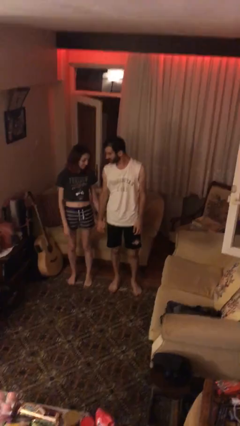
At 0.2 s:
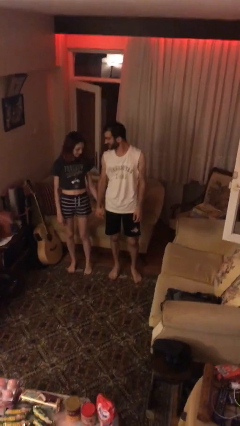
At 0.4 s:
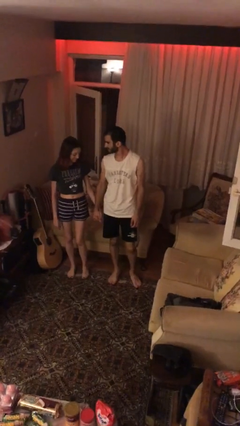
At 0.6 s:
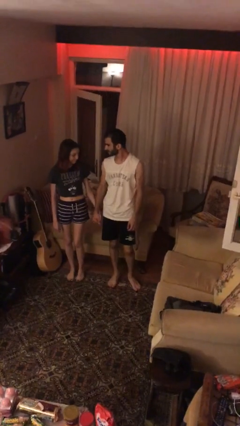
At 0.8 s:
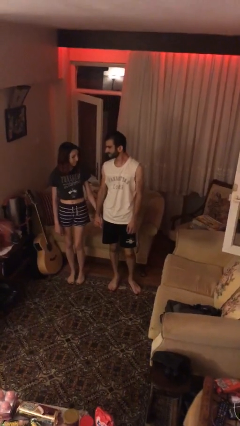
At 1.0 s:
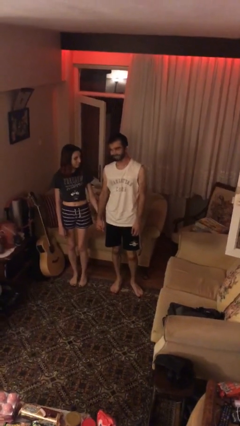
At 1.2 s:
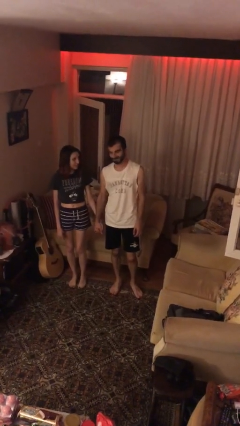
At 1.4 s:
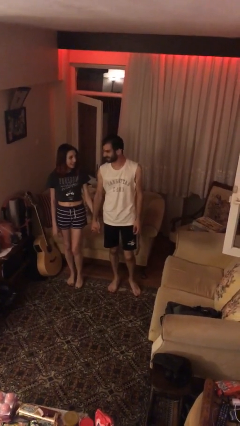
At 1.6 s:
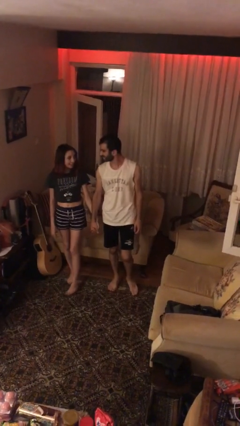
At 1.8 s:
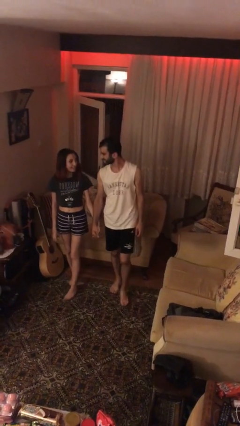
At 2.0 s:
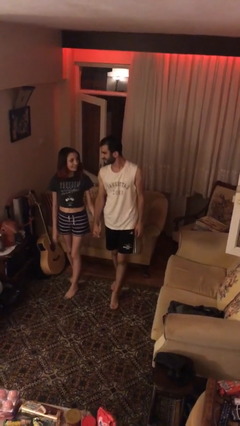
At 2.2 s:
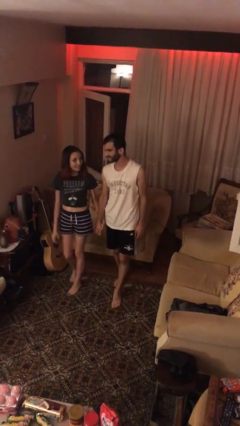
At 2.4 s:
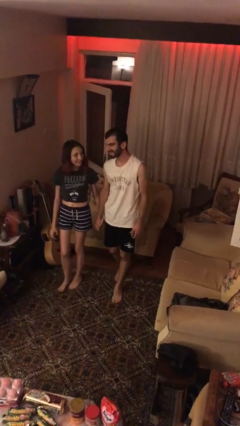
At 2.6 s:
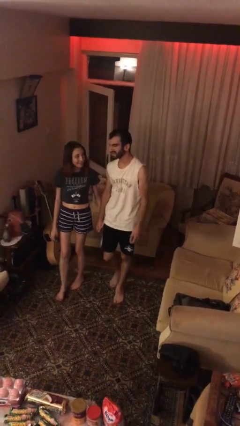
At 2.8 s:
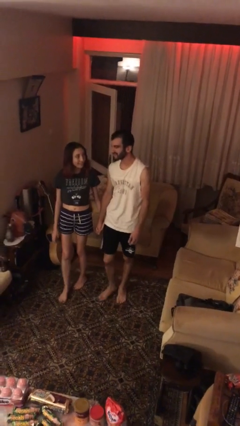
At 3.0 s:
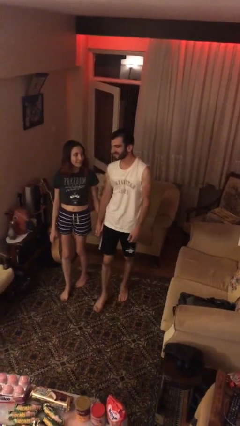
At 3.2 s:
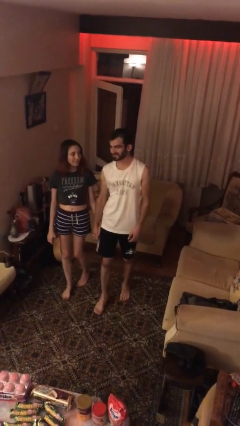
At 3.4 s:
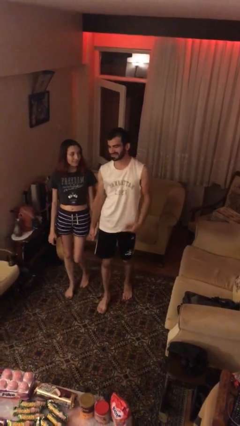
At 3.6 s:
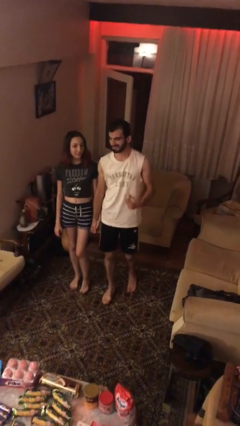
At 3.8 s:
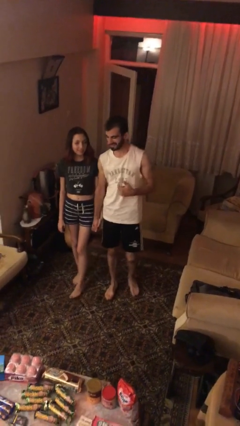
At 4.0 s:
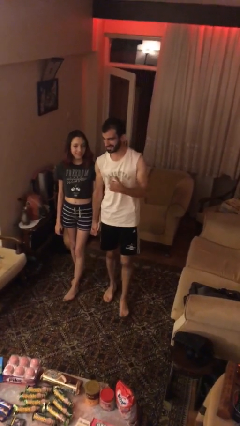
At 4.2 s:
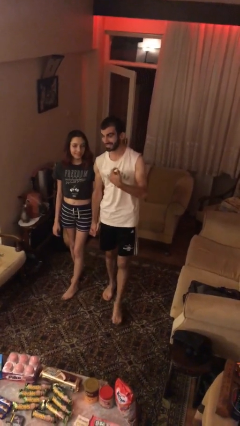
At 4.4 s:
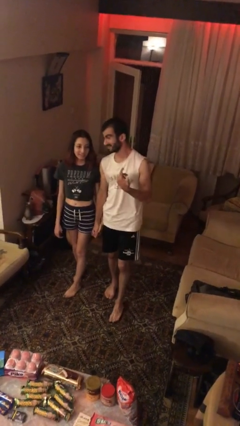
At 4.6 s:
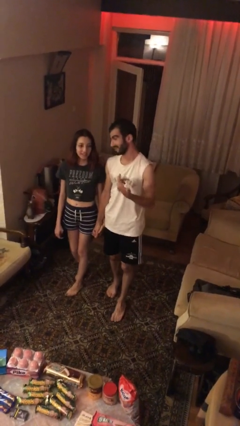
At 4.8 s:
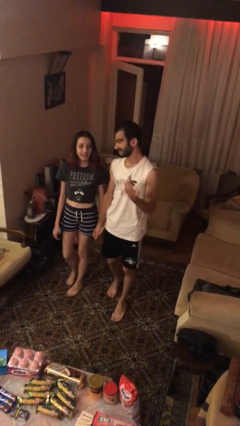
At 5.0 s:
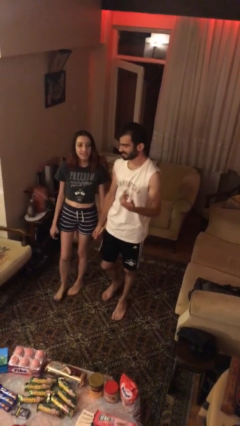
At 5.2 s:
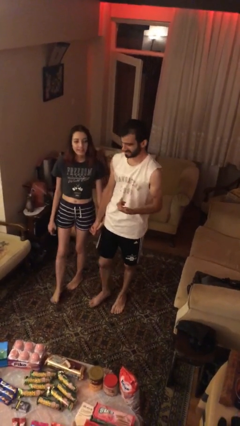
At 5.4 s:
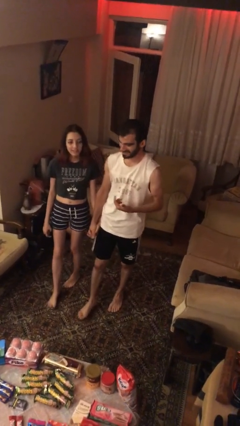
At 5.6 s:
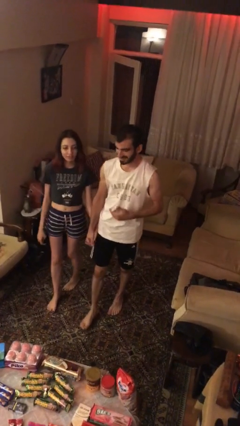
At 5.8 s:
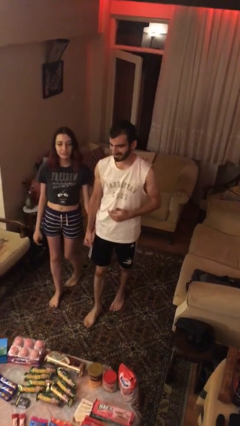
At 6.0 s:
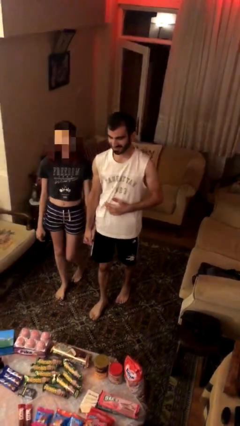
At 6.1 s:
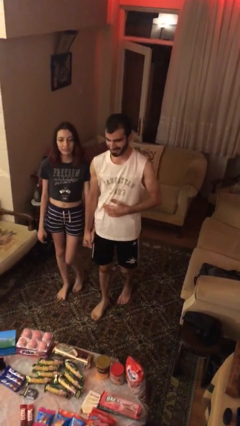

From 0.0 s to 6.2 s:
person holds hand

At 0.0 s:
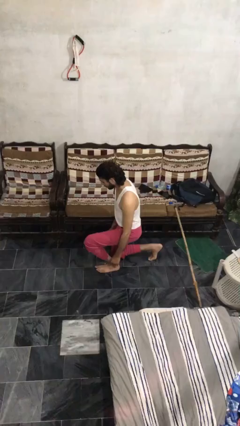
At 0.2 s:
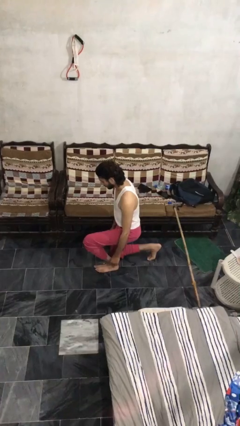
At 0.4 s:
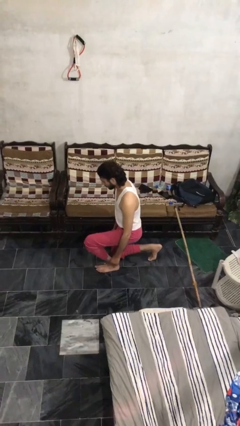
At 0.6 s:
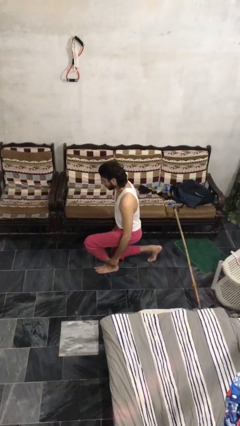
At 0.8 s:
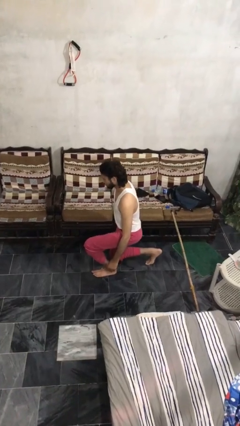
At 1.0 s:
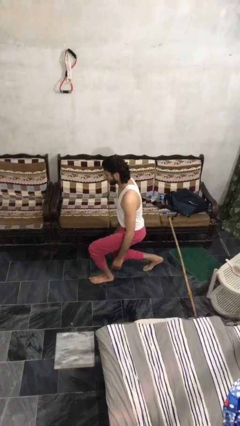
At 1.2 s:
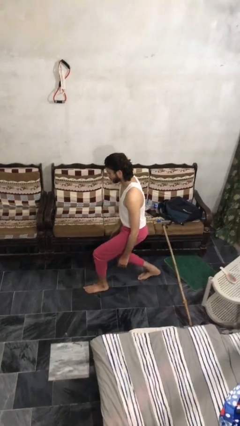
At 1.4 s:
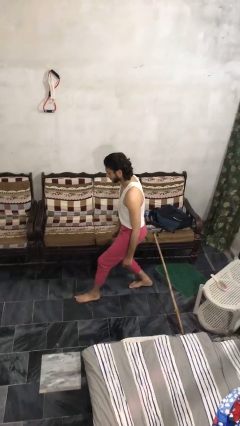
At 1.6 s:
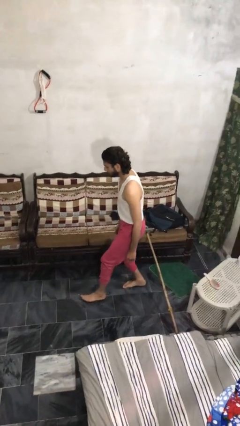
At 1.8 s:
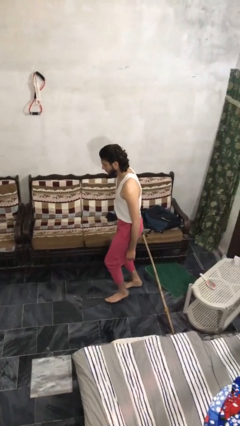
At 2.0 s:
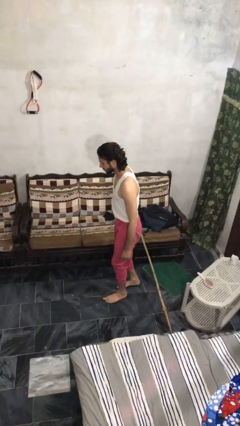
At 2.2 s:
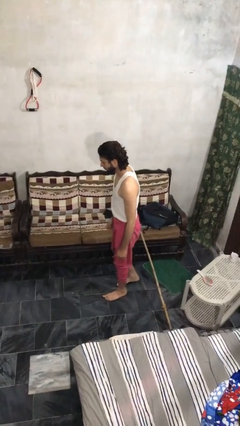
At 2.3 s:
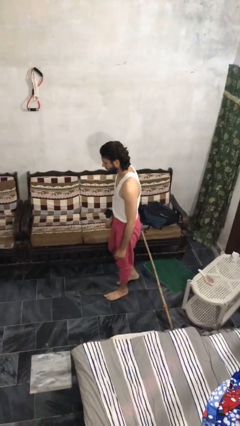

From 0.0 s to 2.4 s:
person stands up from floor

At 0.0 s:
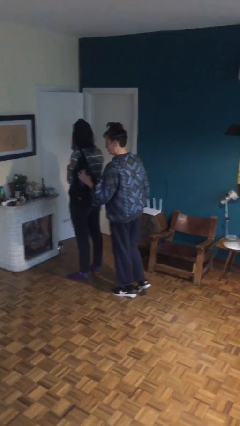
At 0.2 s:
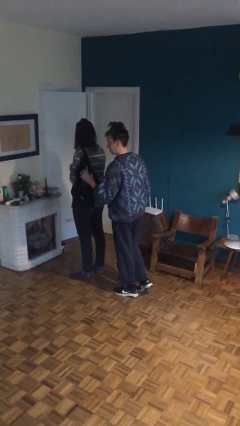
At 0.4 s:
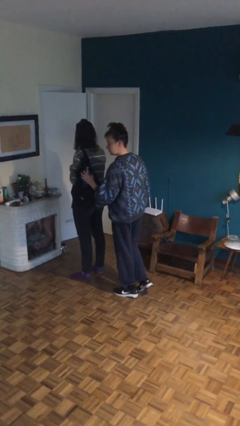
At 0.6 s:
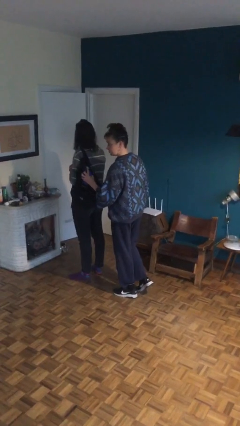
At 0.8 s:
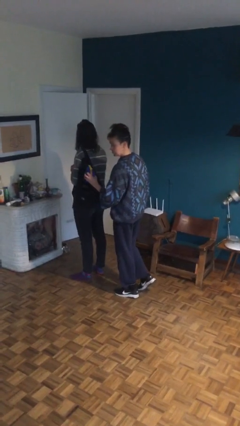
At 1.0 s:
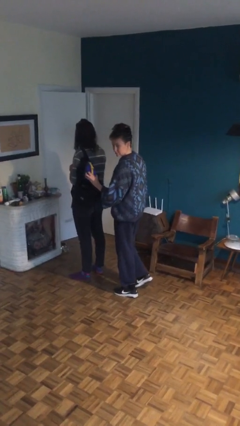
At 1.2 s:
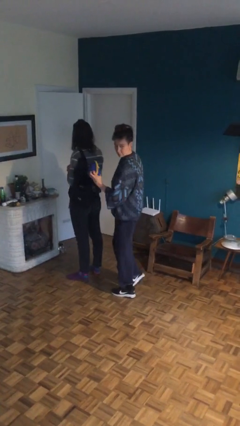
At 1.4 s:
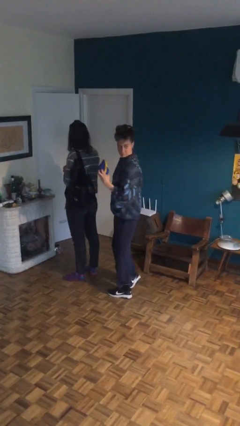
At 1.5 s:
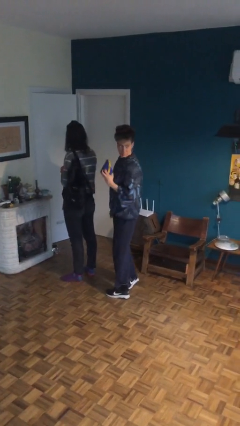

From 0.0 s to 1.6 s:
person steals object from person

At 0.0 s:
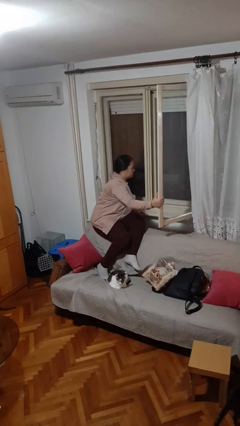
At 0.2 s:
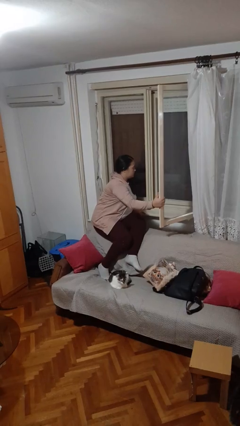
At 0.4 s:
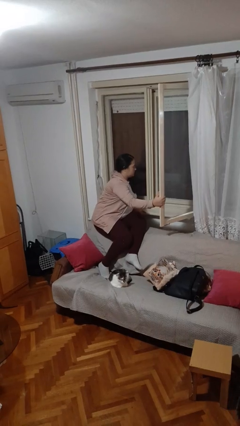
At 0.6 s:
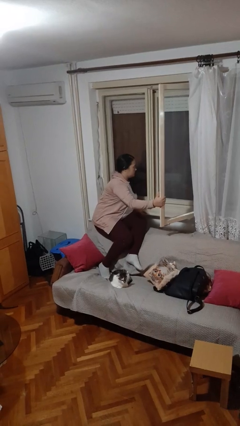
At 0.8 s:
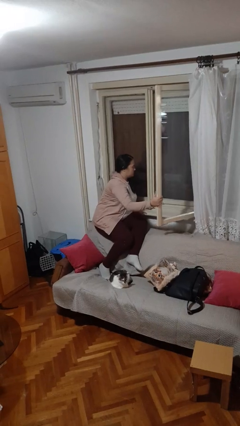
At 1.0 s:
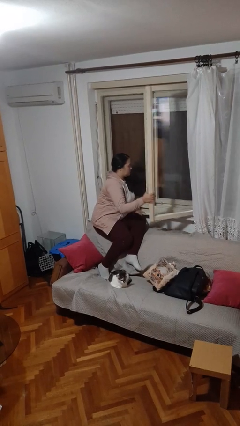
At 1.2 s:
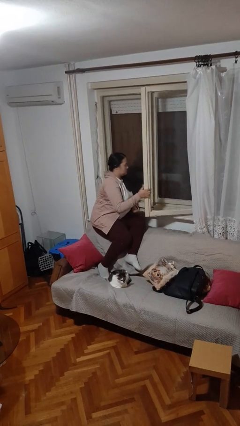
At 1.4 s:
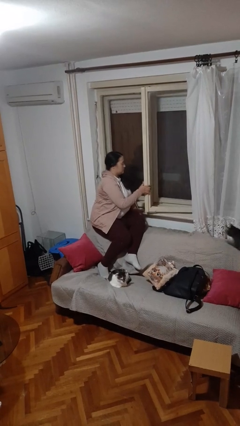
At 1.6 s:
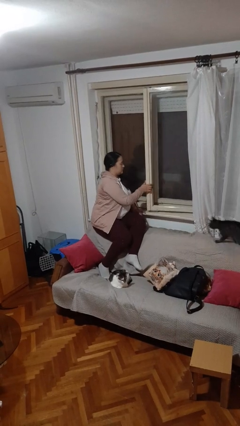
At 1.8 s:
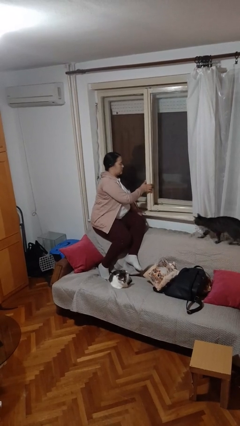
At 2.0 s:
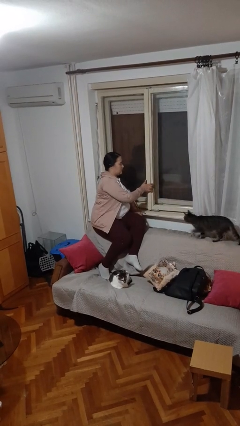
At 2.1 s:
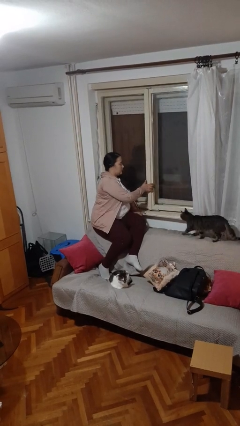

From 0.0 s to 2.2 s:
person closes home window

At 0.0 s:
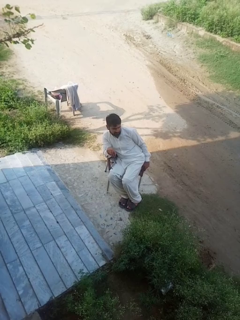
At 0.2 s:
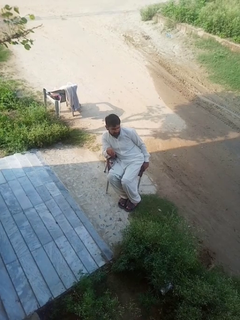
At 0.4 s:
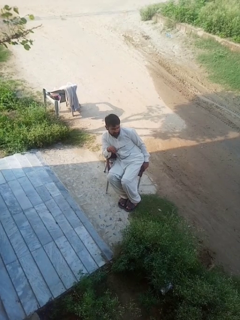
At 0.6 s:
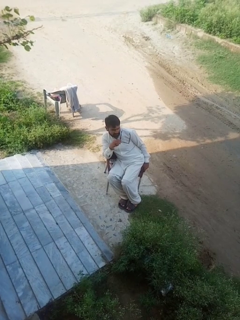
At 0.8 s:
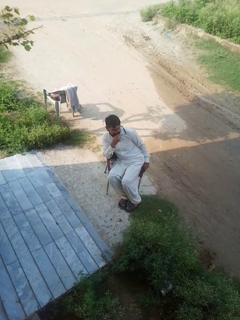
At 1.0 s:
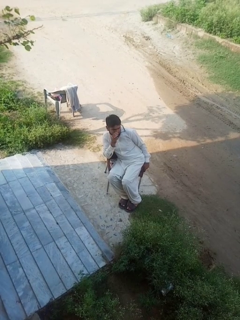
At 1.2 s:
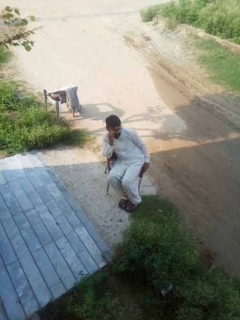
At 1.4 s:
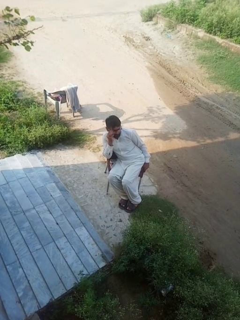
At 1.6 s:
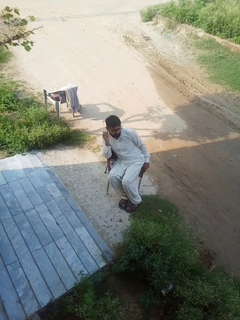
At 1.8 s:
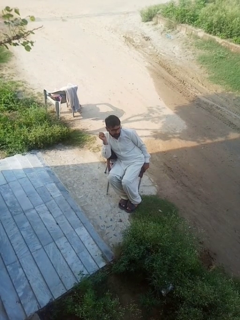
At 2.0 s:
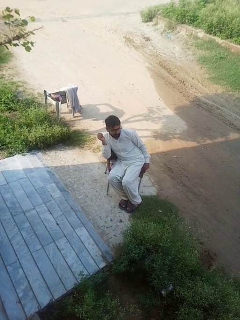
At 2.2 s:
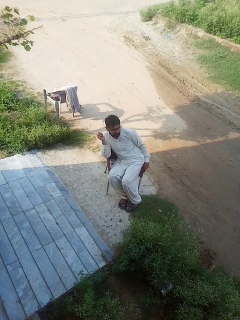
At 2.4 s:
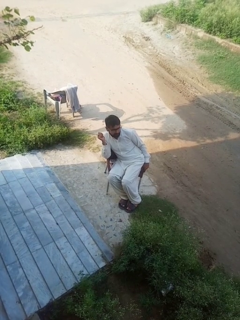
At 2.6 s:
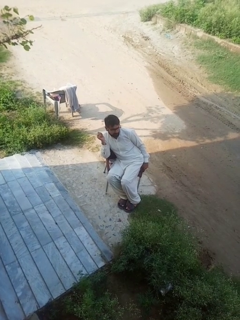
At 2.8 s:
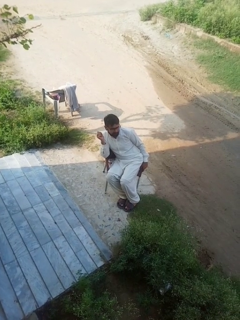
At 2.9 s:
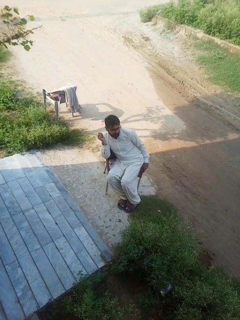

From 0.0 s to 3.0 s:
person puts on glasses

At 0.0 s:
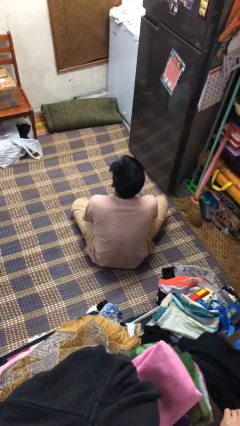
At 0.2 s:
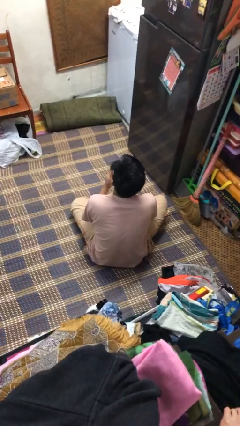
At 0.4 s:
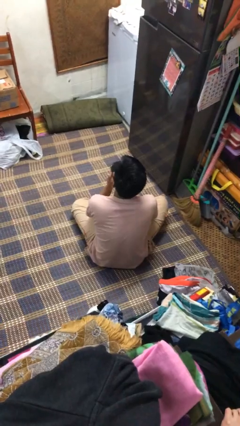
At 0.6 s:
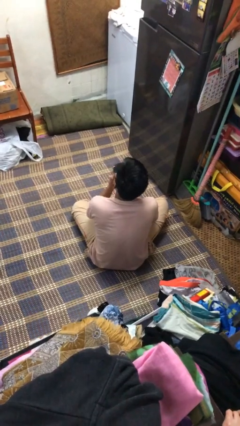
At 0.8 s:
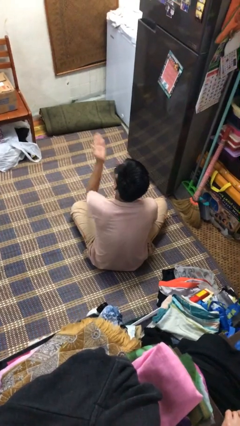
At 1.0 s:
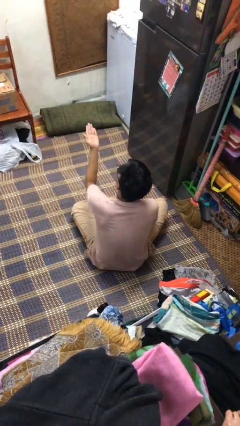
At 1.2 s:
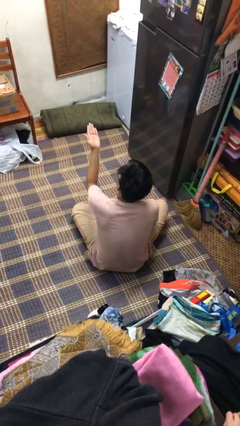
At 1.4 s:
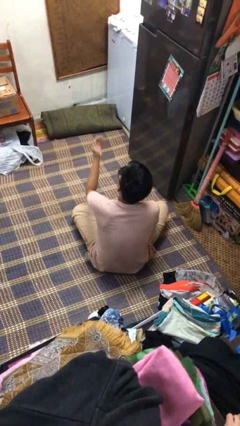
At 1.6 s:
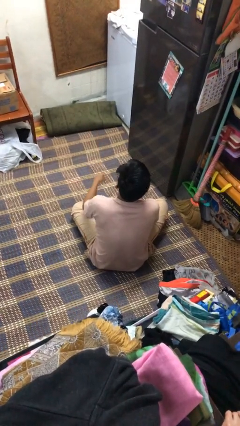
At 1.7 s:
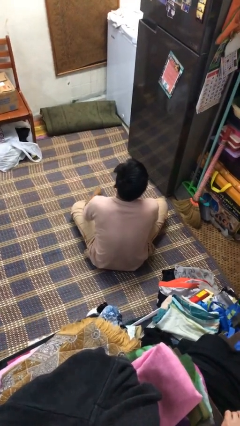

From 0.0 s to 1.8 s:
person gestures blow kiss

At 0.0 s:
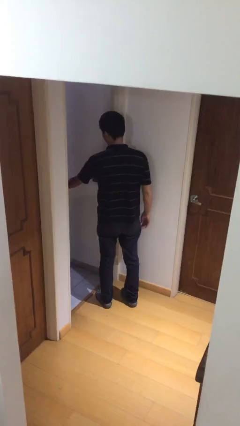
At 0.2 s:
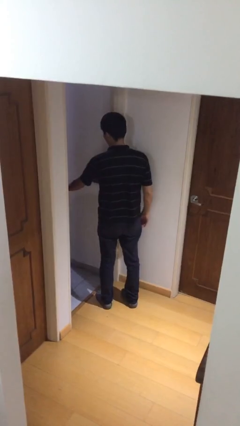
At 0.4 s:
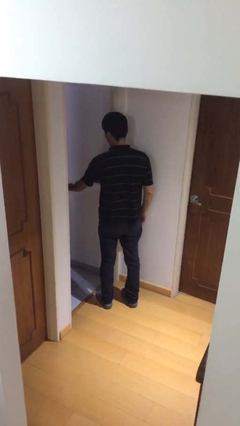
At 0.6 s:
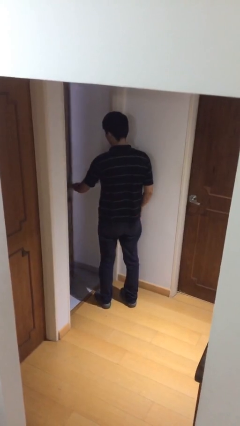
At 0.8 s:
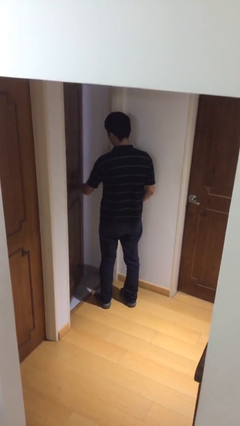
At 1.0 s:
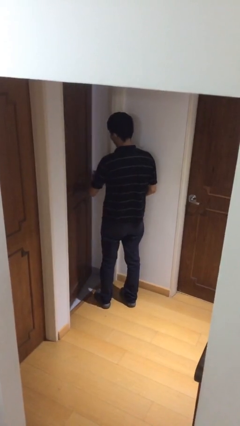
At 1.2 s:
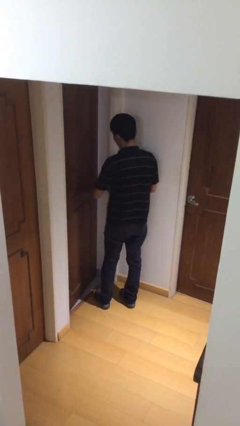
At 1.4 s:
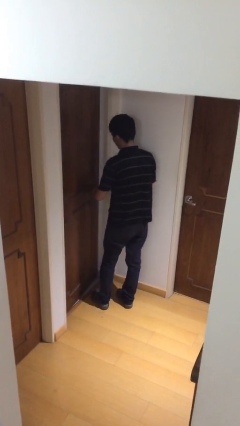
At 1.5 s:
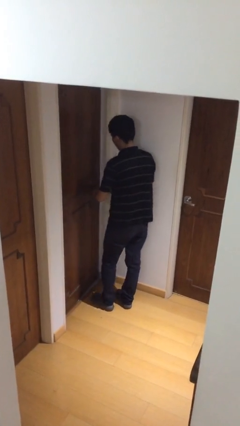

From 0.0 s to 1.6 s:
person closes facility door
